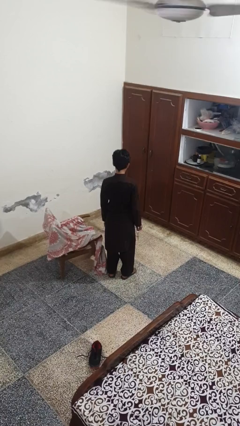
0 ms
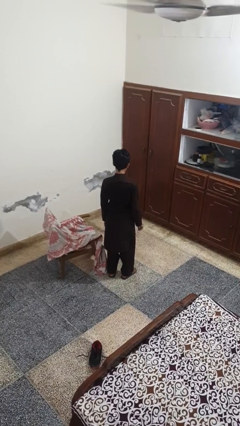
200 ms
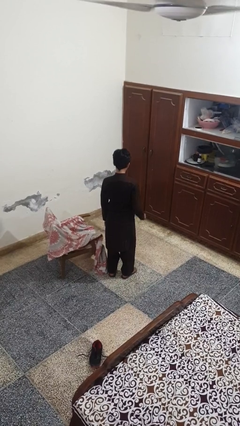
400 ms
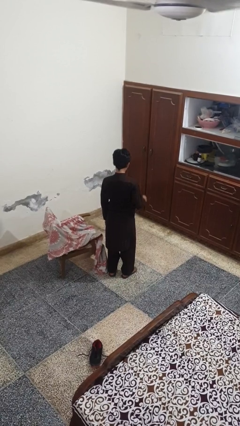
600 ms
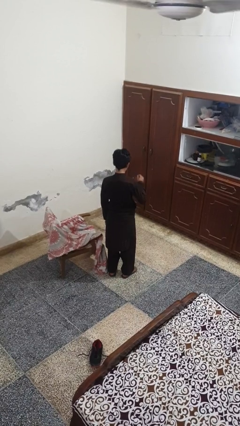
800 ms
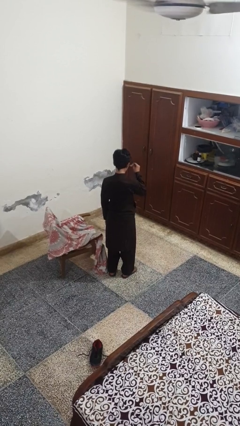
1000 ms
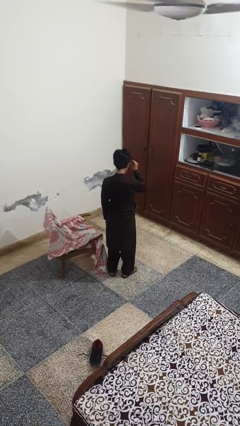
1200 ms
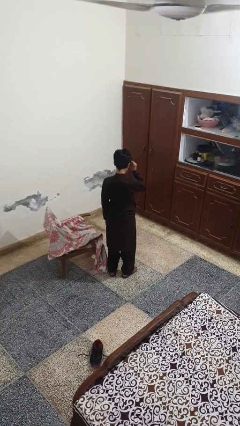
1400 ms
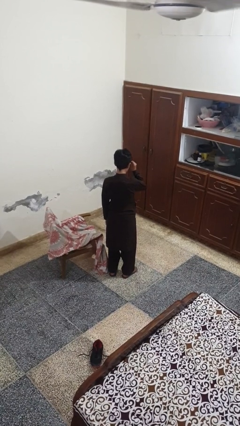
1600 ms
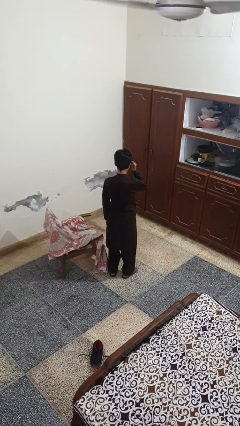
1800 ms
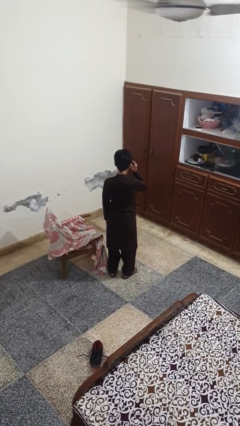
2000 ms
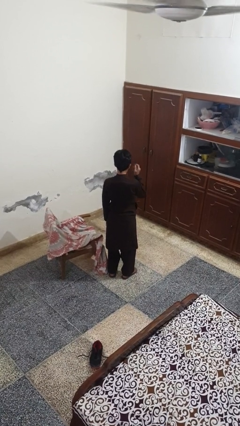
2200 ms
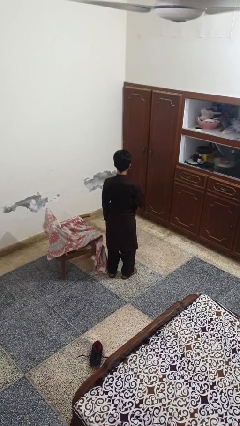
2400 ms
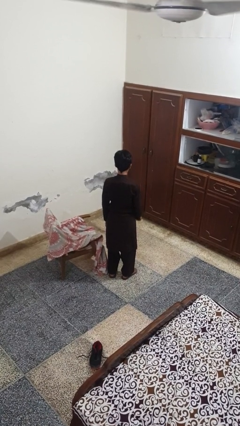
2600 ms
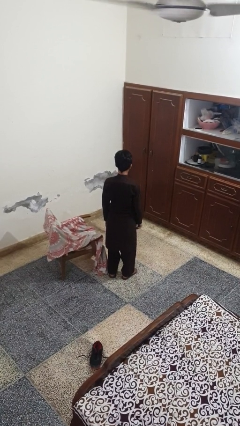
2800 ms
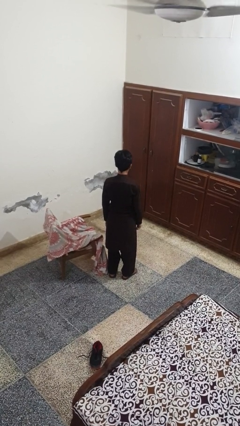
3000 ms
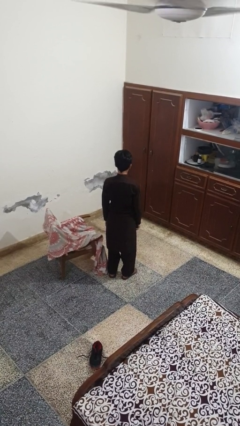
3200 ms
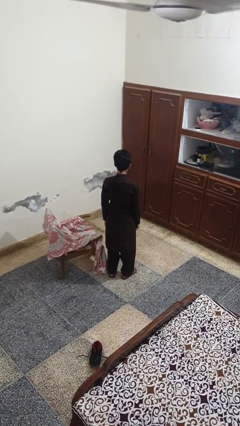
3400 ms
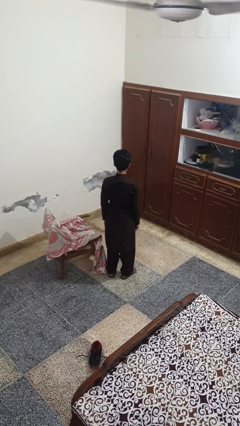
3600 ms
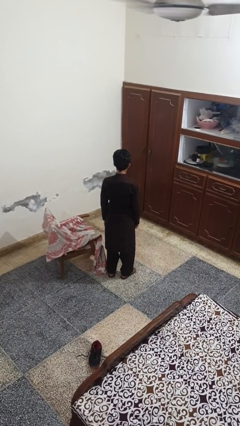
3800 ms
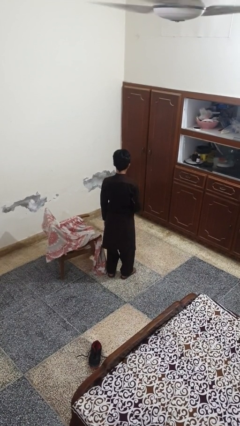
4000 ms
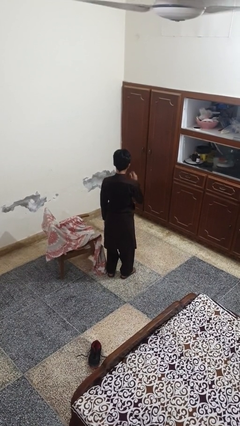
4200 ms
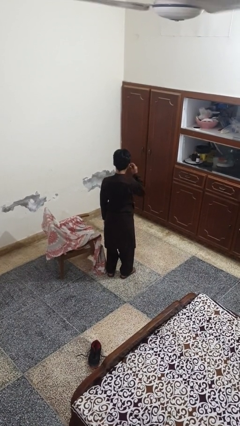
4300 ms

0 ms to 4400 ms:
person puts on glasses

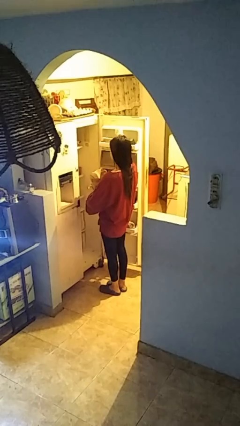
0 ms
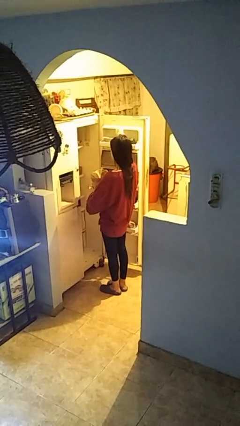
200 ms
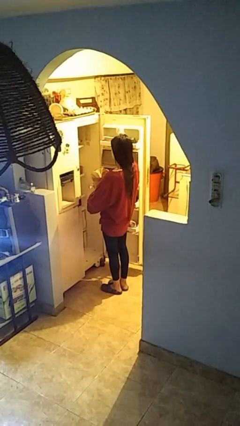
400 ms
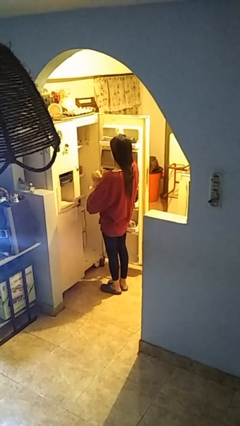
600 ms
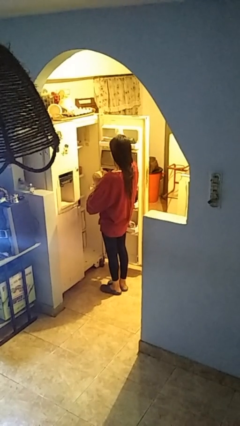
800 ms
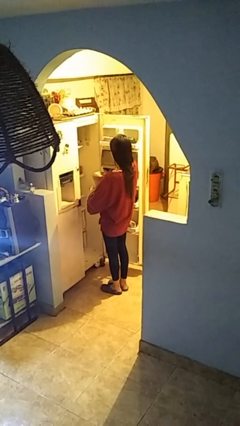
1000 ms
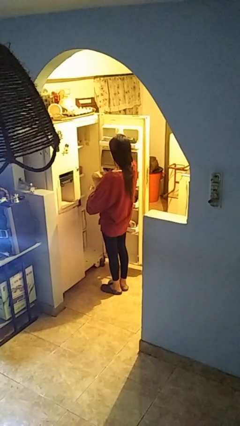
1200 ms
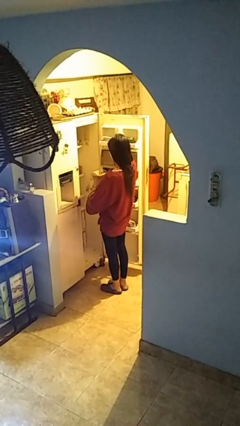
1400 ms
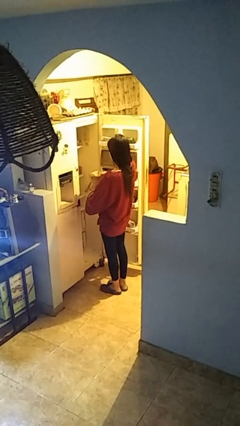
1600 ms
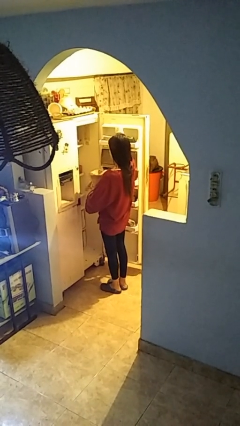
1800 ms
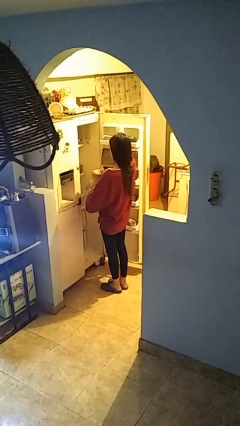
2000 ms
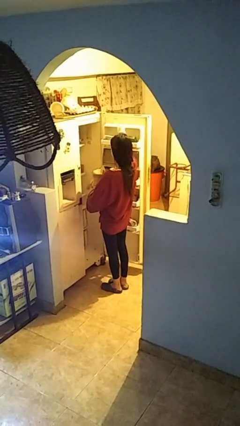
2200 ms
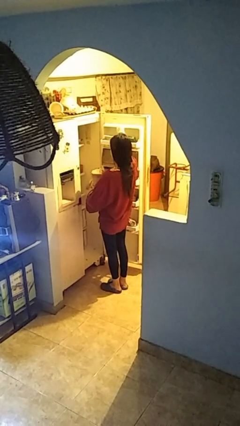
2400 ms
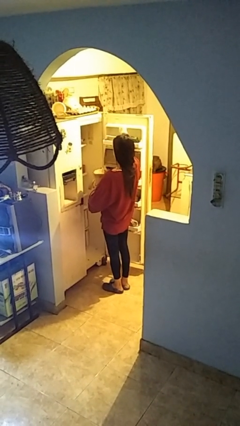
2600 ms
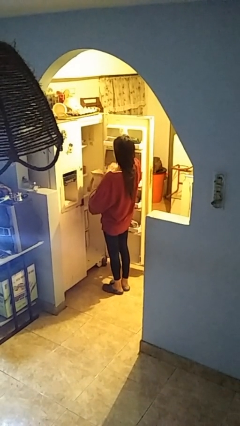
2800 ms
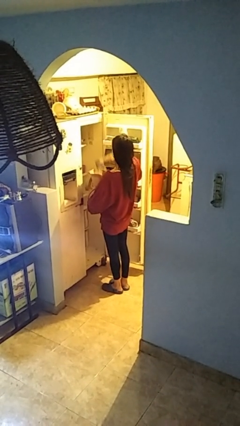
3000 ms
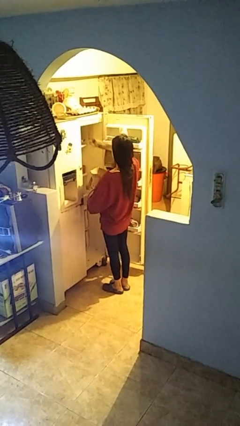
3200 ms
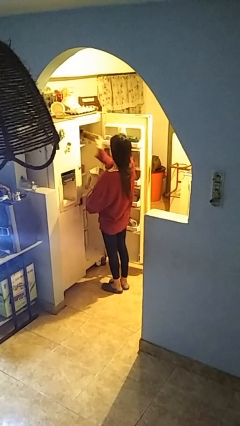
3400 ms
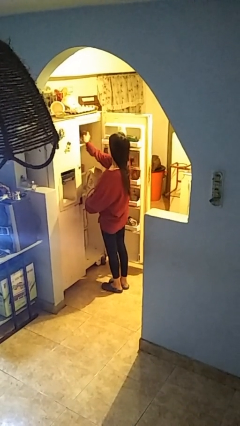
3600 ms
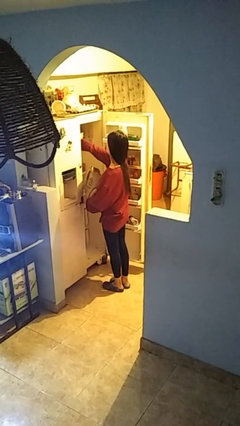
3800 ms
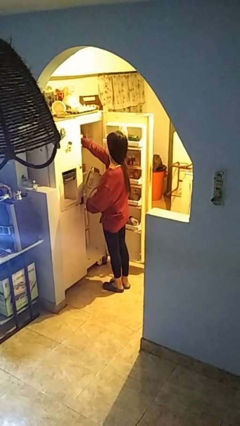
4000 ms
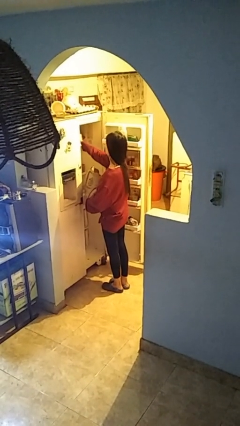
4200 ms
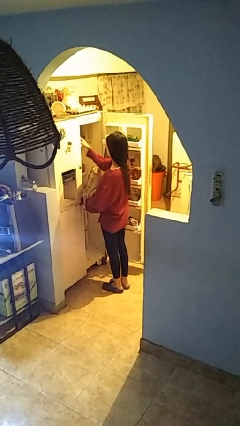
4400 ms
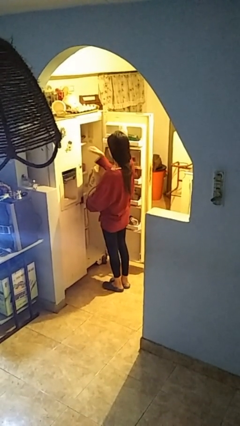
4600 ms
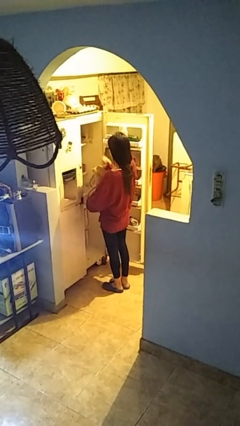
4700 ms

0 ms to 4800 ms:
person loads groceries into refrigerator

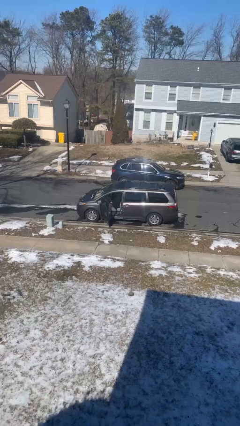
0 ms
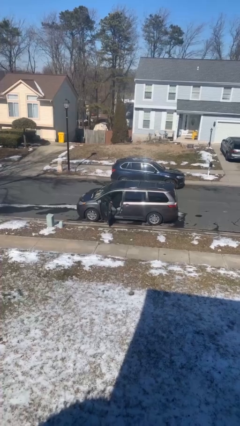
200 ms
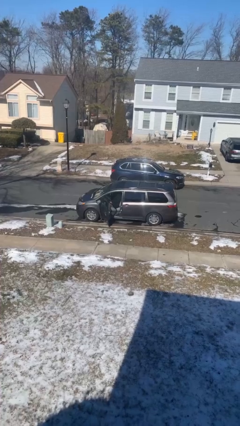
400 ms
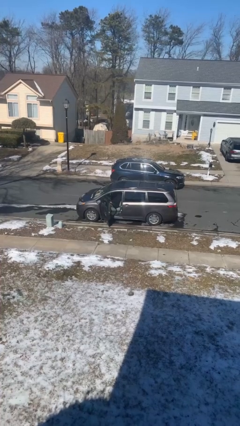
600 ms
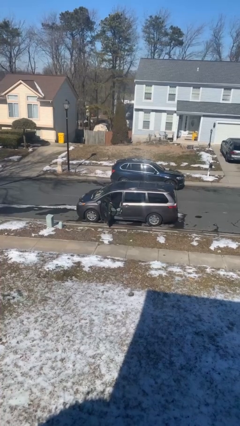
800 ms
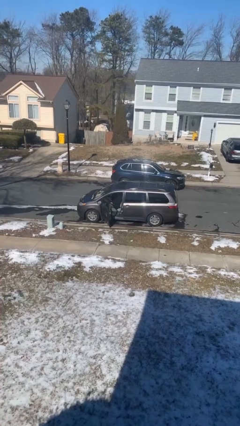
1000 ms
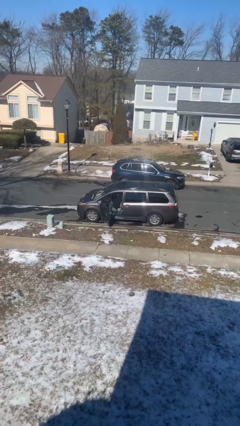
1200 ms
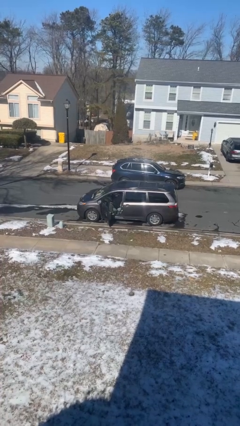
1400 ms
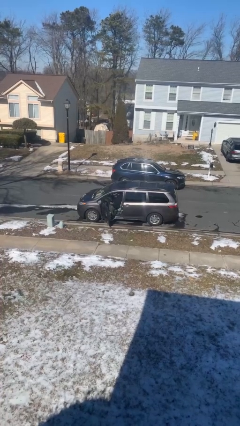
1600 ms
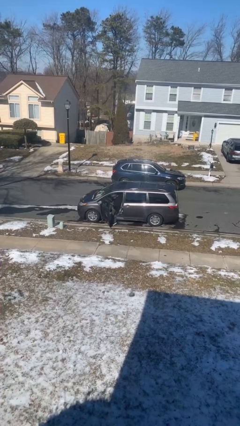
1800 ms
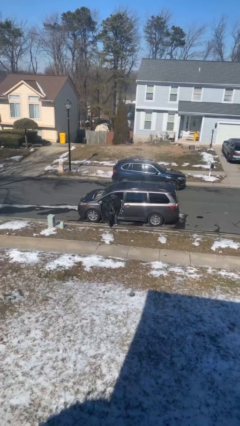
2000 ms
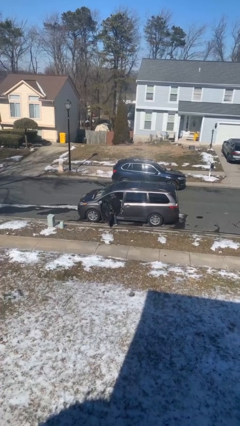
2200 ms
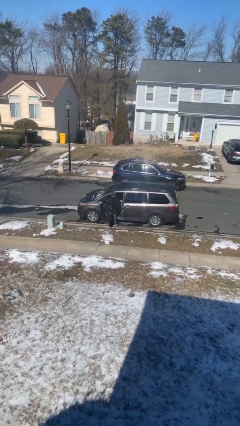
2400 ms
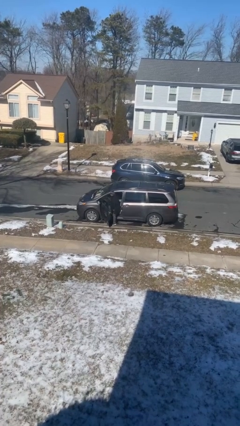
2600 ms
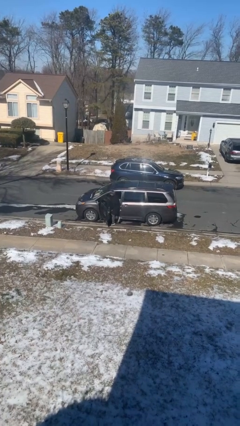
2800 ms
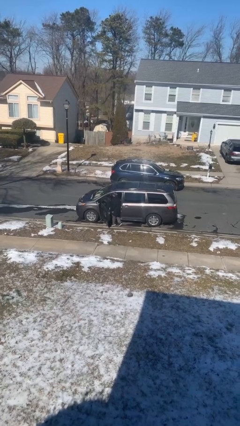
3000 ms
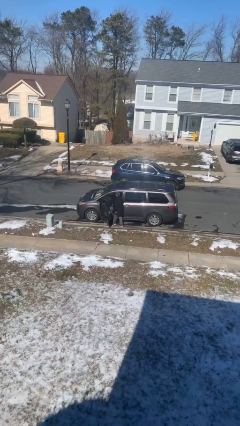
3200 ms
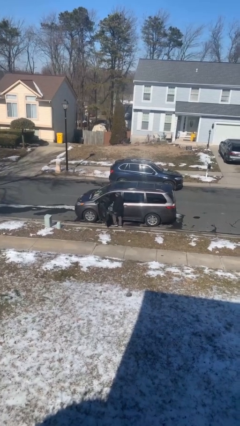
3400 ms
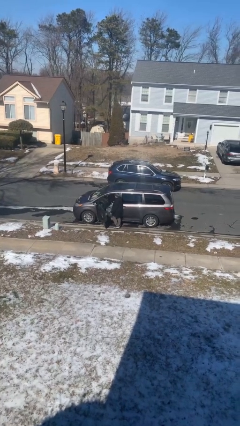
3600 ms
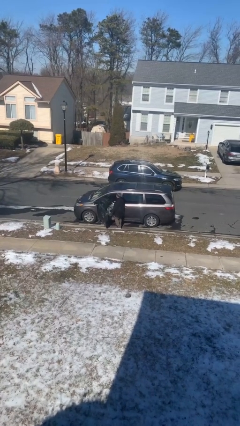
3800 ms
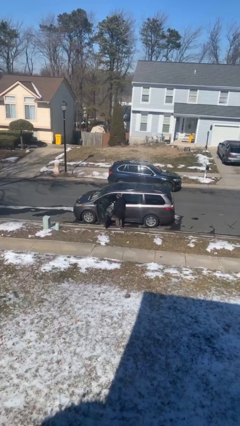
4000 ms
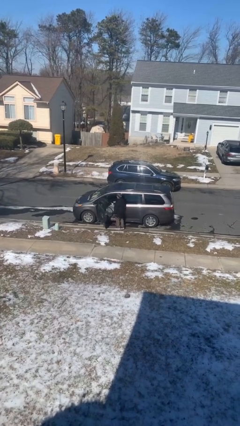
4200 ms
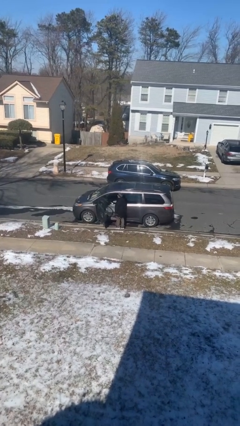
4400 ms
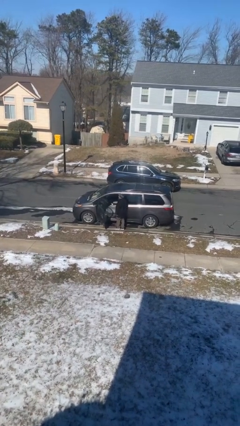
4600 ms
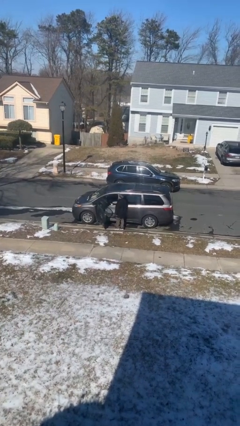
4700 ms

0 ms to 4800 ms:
person exits car

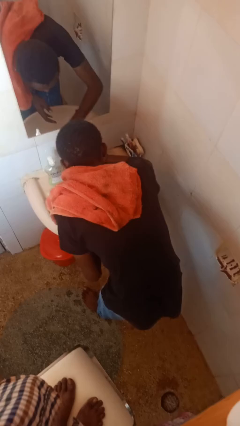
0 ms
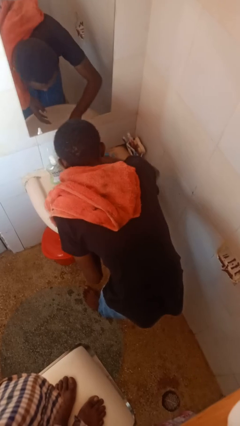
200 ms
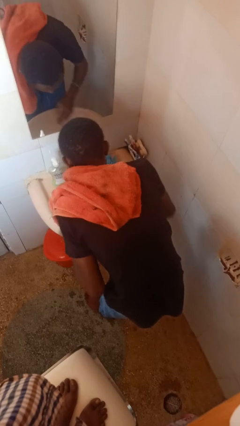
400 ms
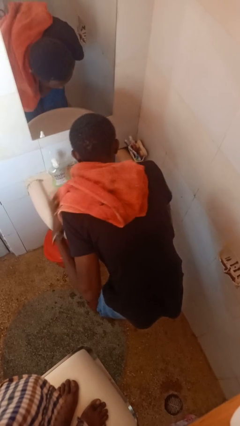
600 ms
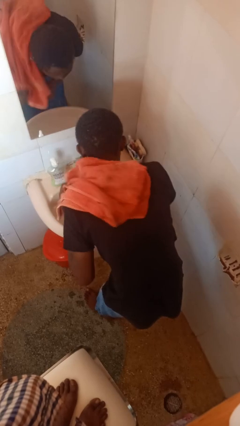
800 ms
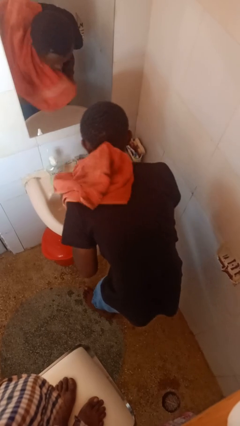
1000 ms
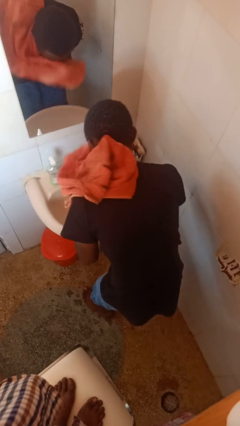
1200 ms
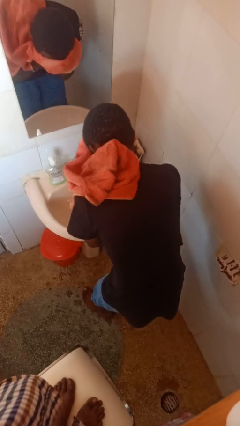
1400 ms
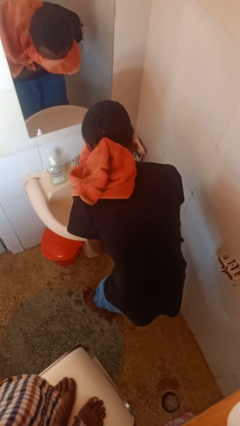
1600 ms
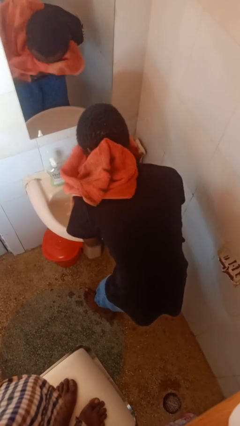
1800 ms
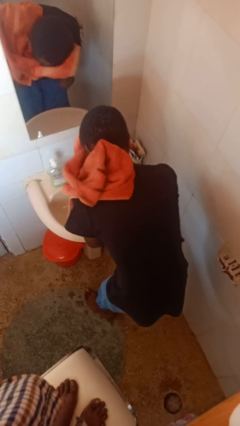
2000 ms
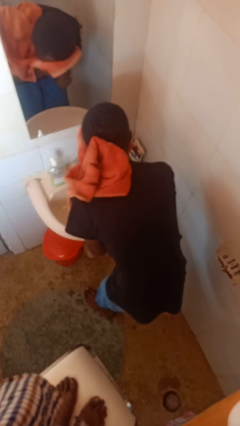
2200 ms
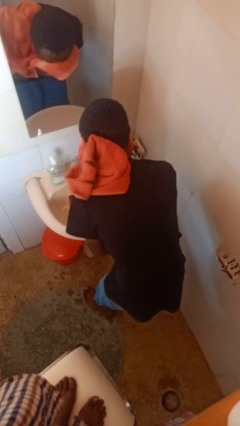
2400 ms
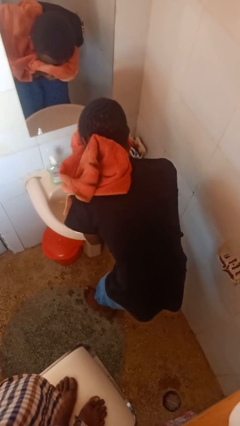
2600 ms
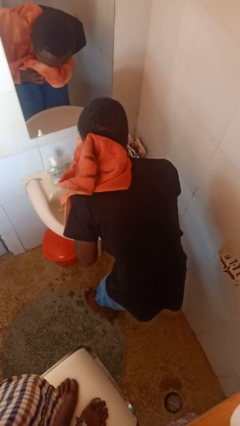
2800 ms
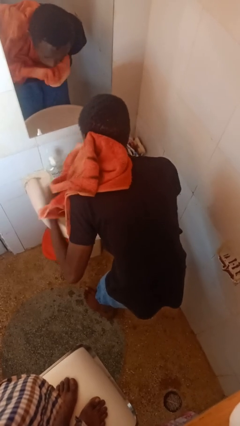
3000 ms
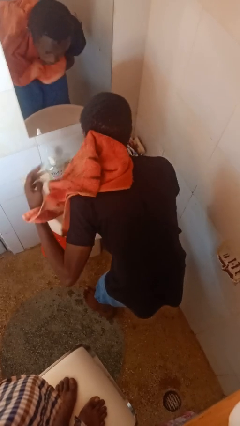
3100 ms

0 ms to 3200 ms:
person dries face with towel

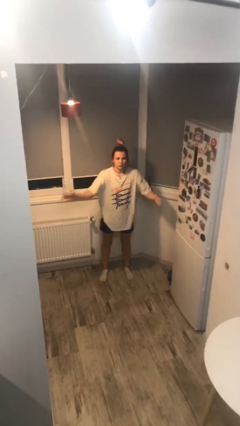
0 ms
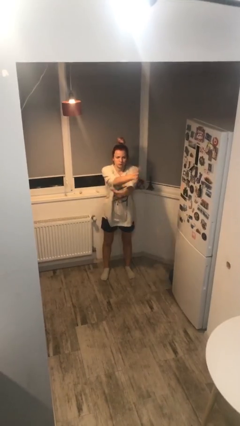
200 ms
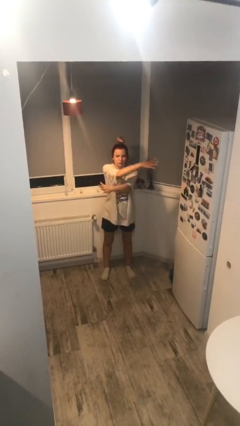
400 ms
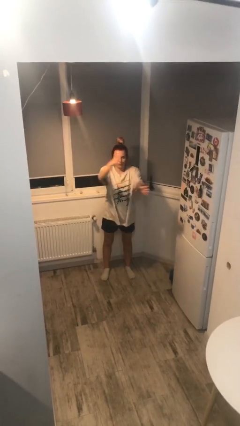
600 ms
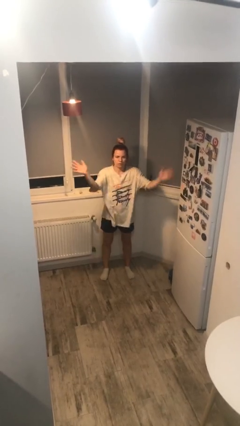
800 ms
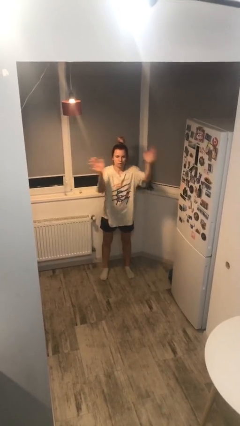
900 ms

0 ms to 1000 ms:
person punches
